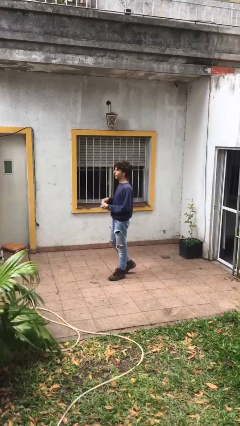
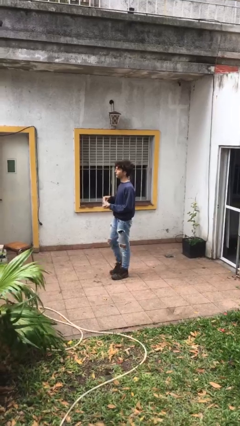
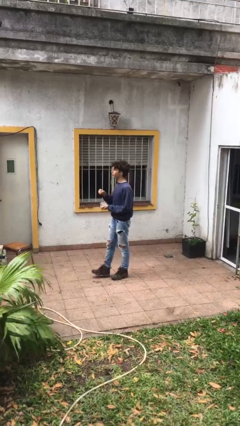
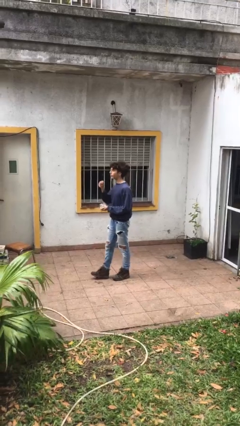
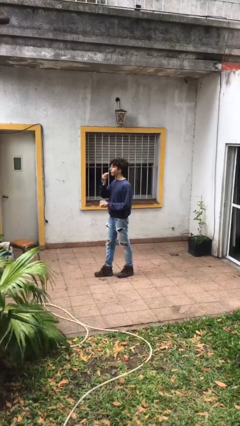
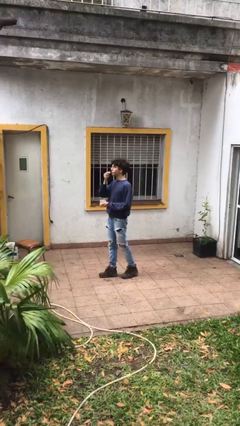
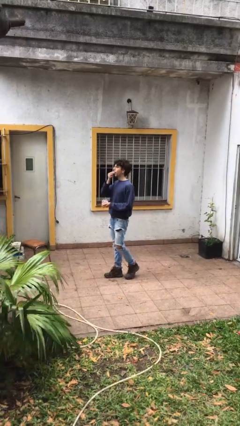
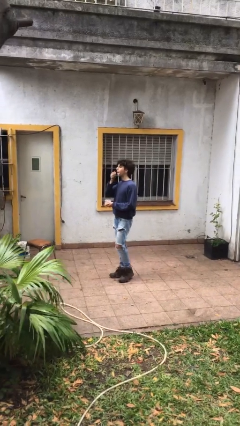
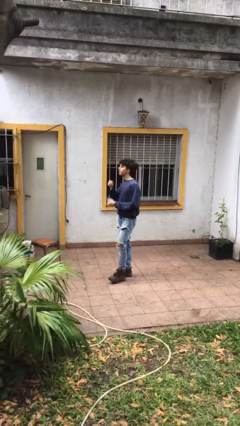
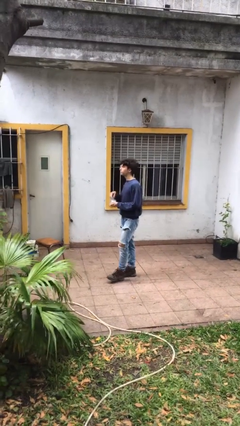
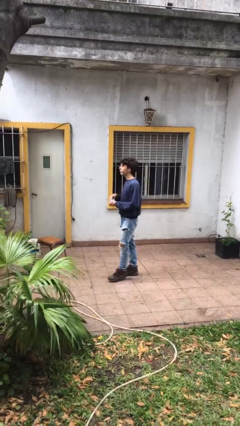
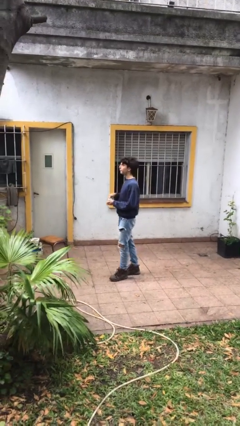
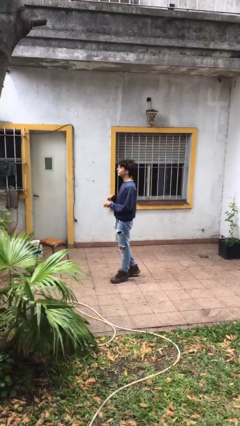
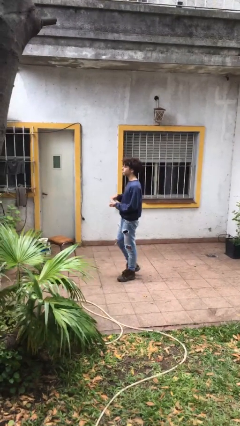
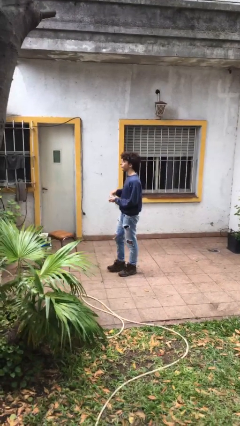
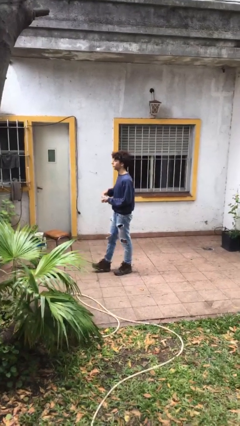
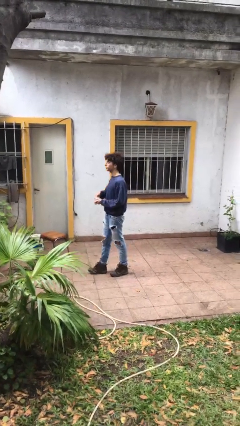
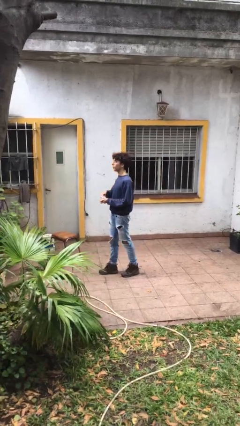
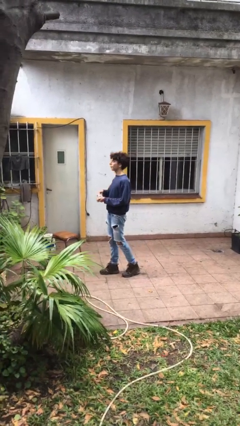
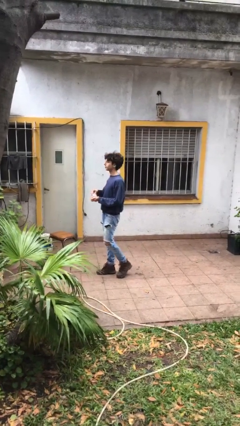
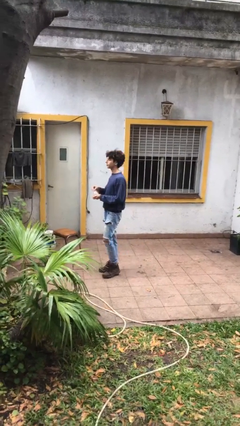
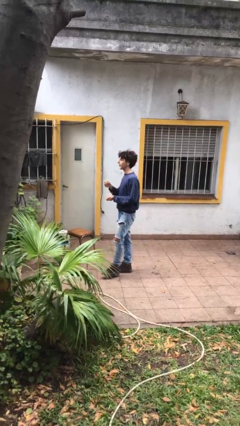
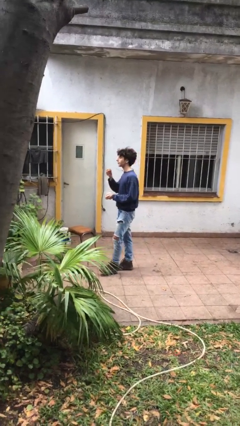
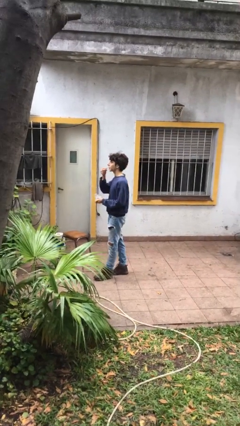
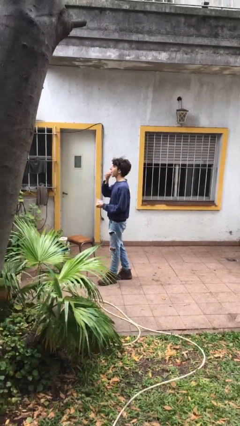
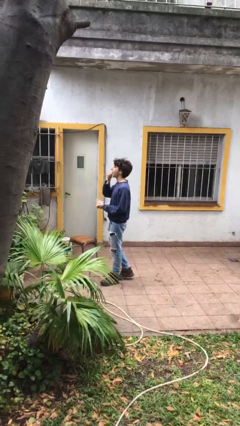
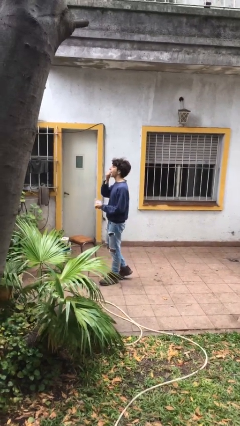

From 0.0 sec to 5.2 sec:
person eats snack from bag

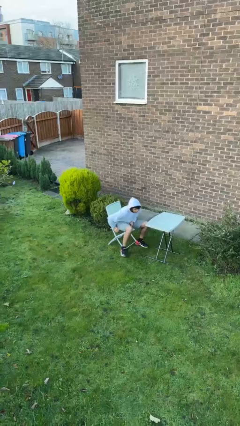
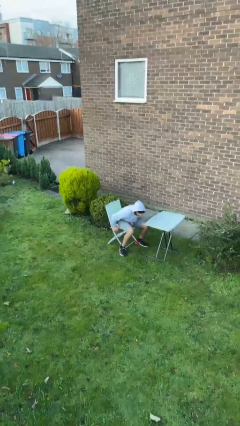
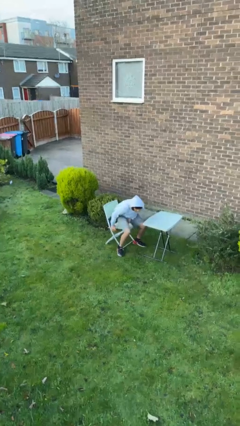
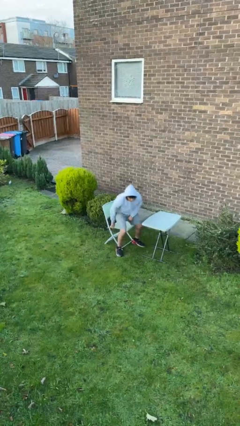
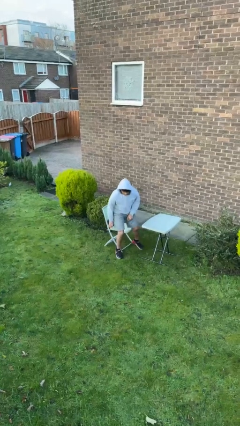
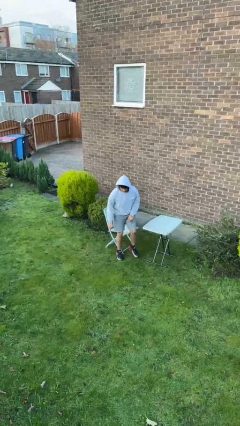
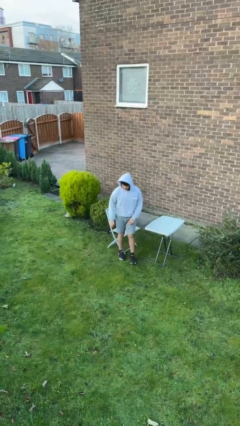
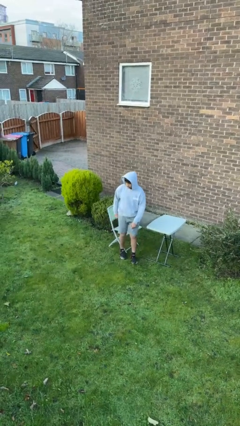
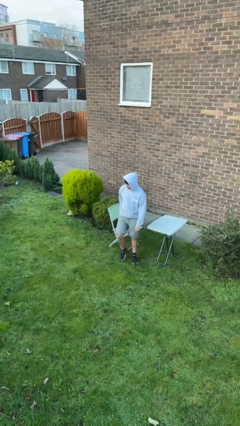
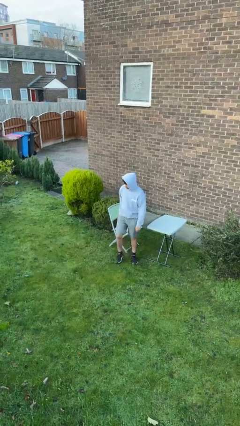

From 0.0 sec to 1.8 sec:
person stands up

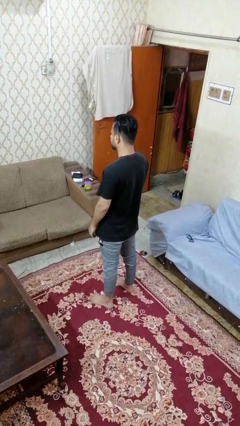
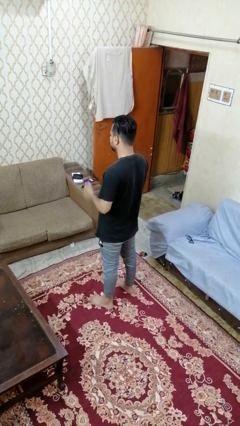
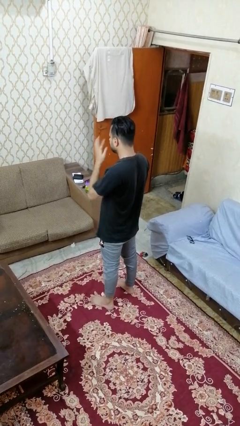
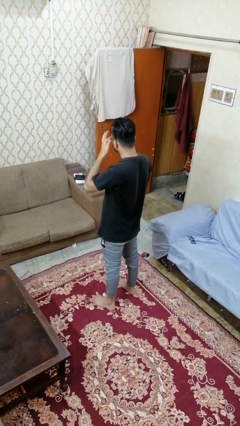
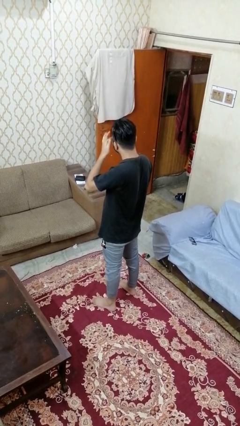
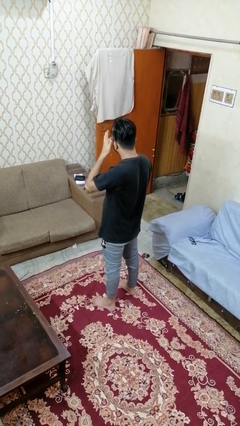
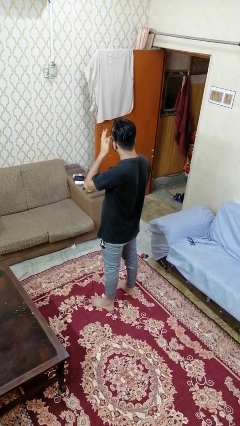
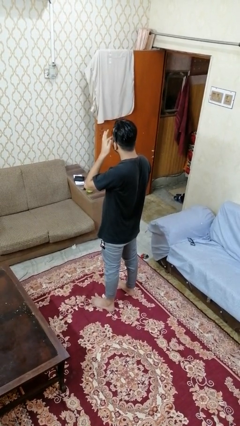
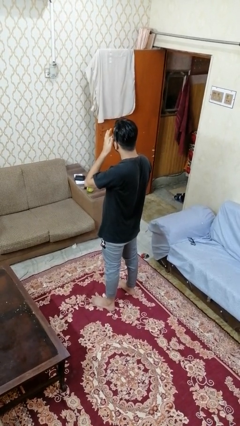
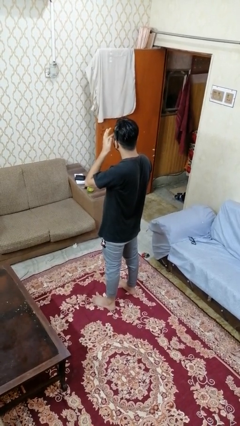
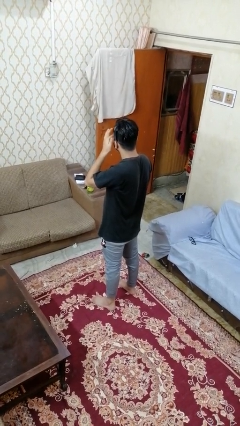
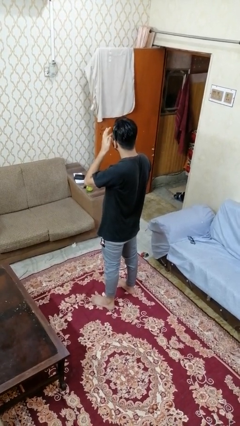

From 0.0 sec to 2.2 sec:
person rubs eyes

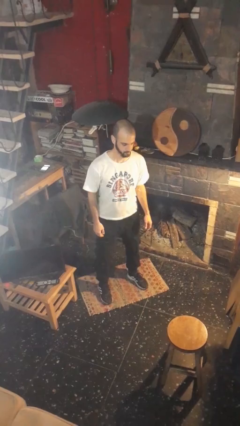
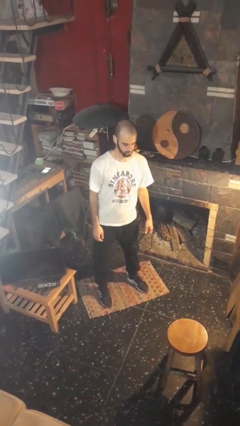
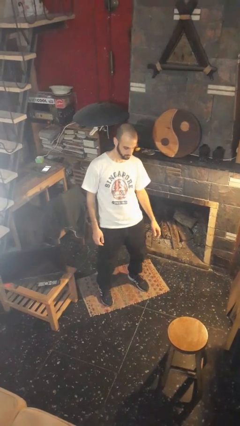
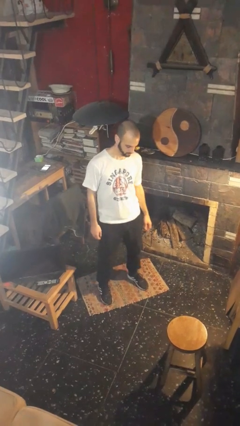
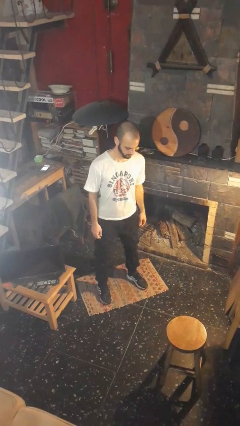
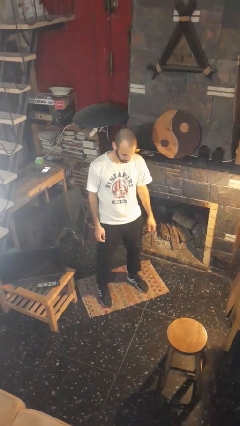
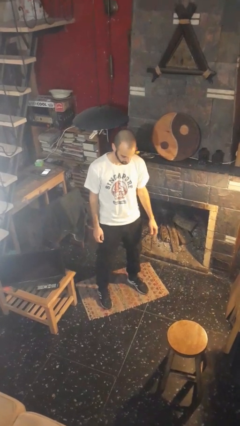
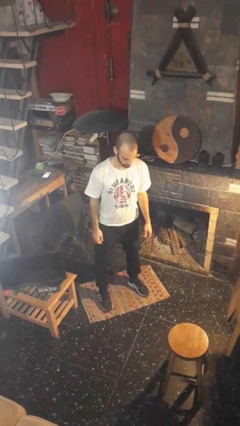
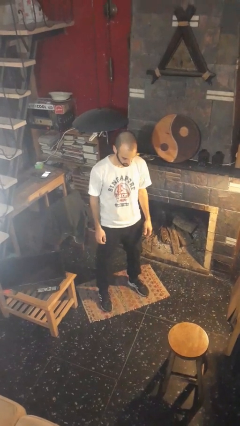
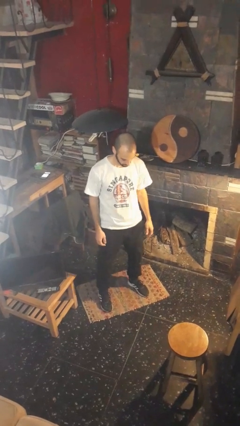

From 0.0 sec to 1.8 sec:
person wiggles hips

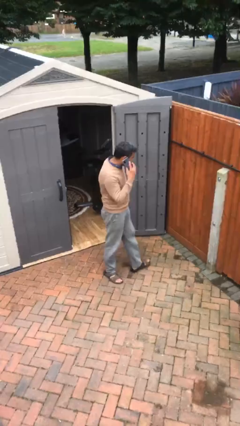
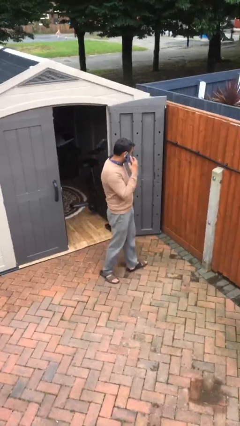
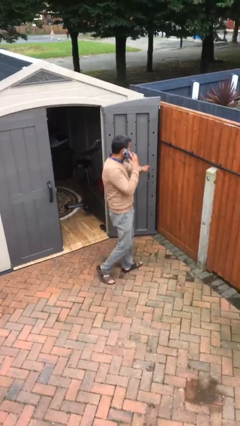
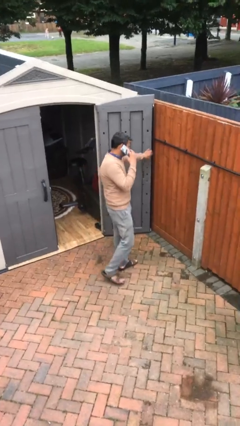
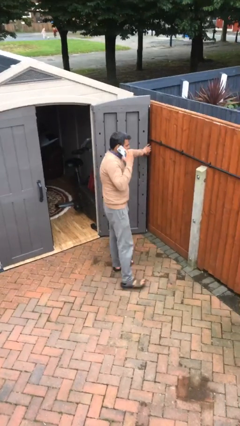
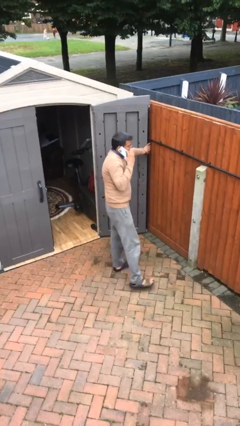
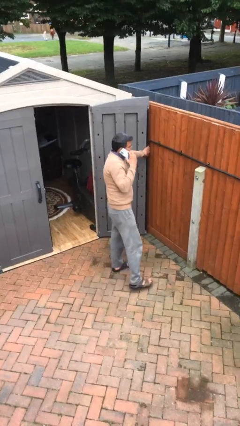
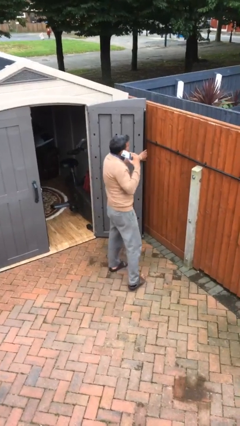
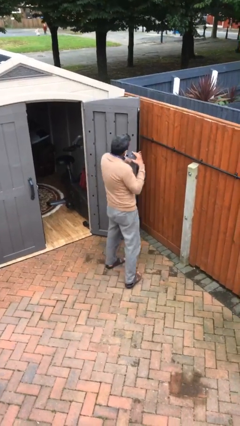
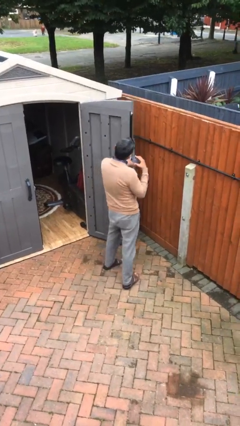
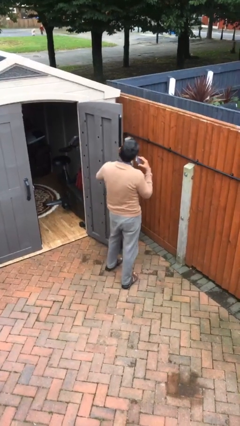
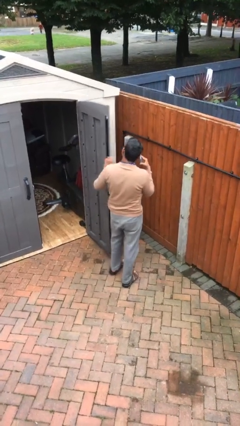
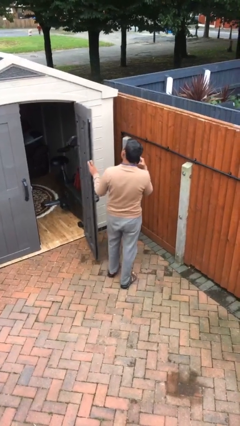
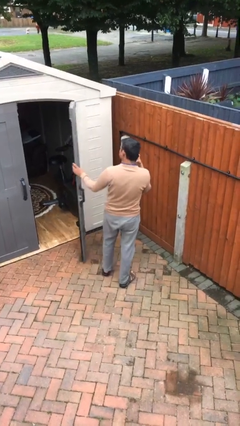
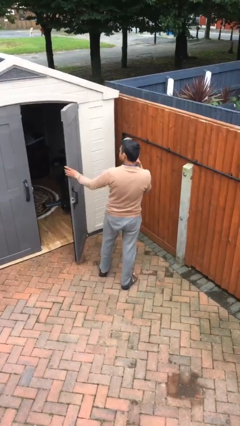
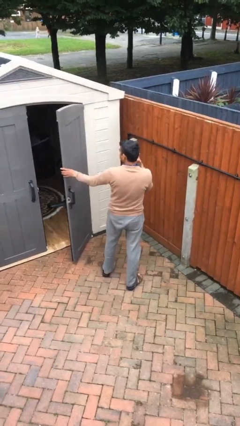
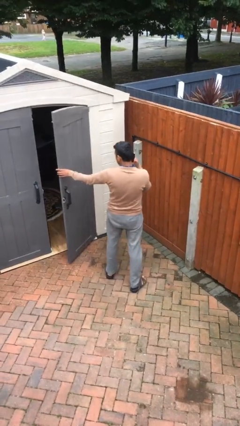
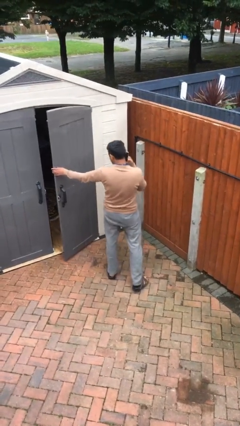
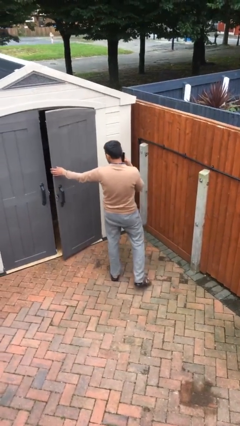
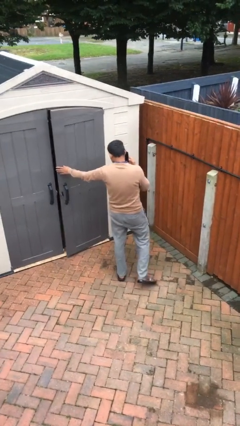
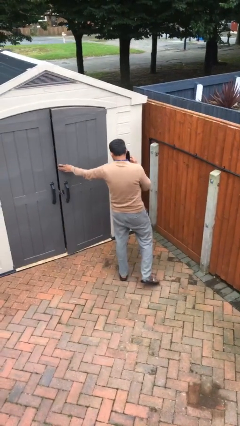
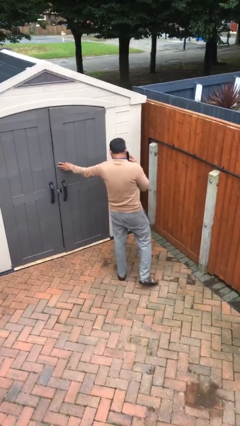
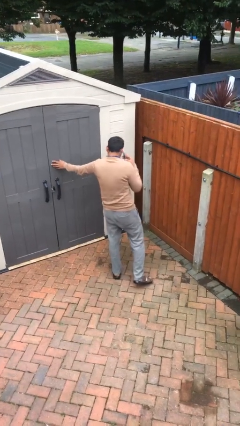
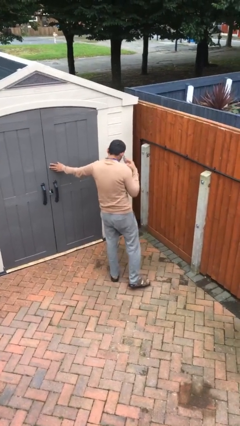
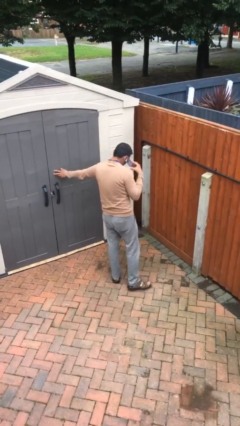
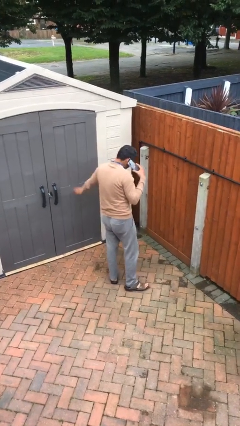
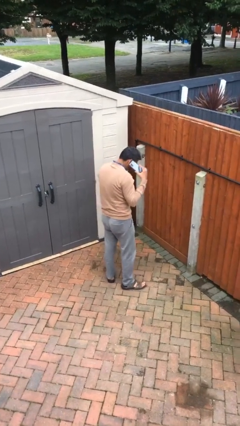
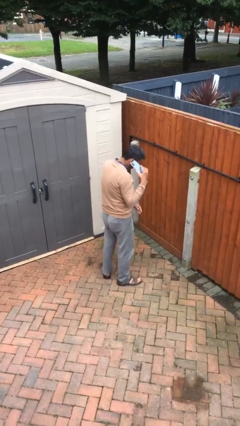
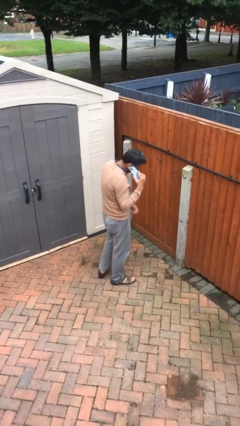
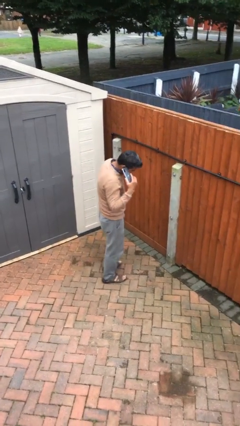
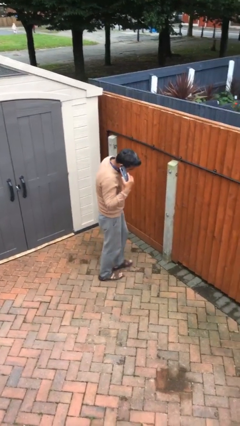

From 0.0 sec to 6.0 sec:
person closes facility door

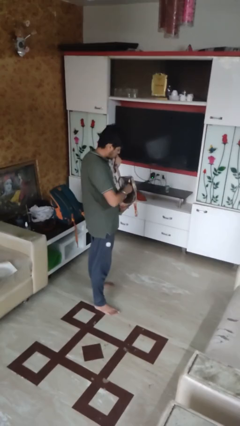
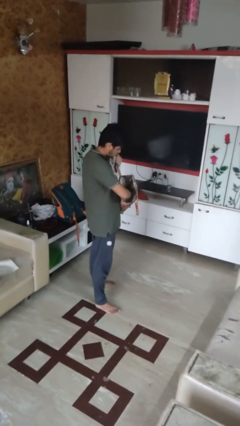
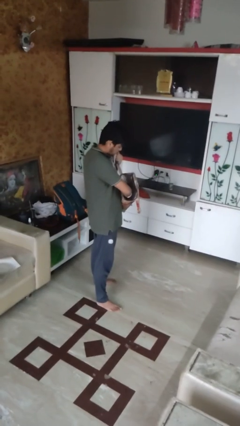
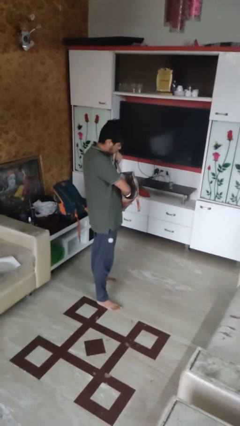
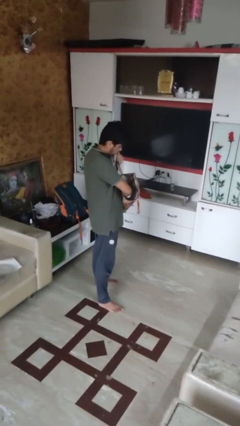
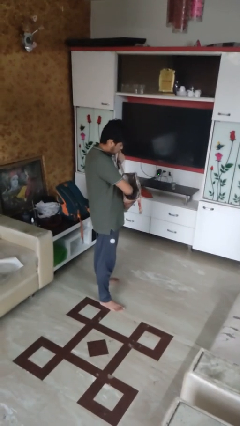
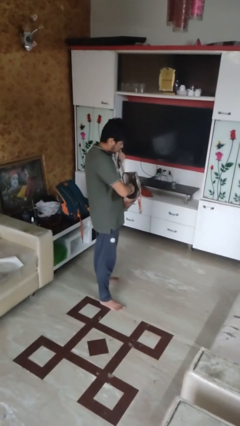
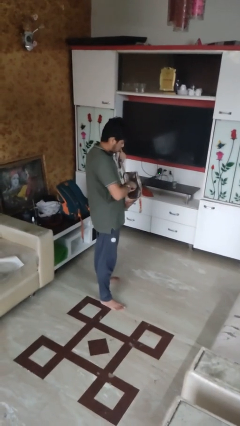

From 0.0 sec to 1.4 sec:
person puts object into purse
